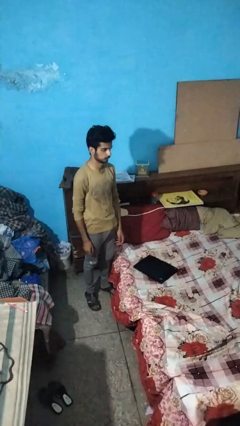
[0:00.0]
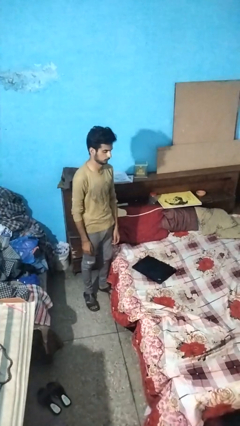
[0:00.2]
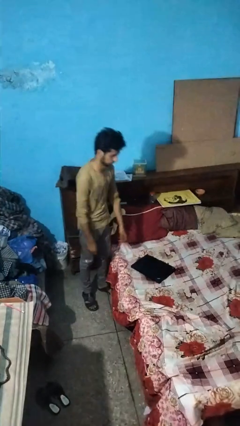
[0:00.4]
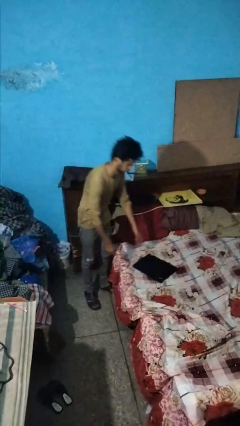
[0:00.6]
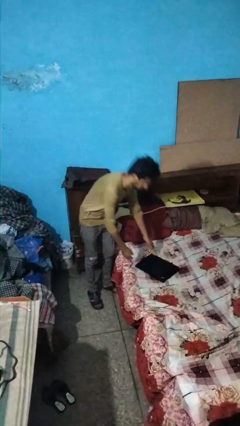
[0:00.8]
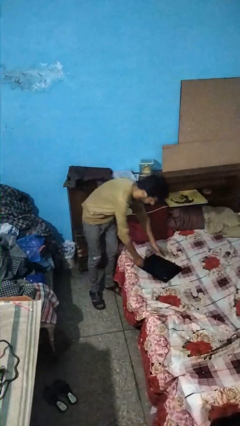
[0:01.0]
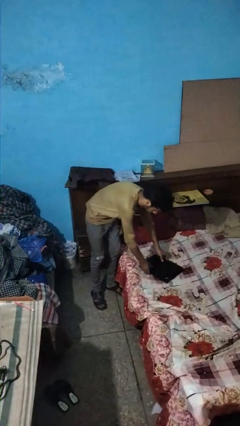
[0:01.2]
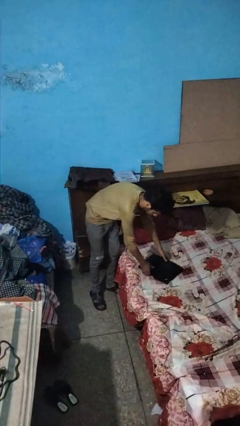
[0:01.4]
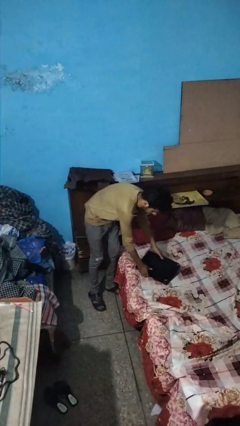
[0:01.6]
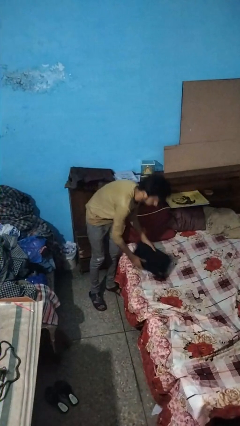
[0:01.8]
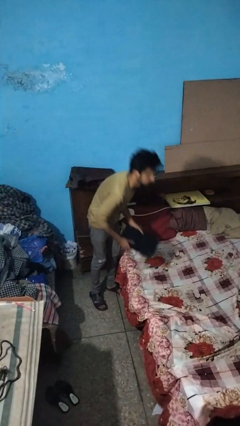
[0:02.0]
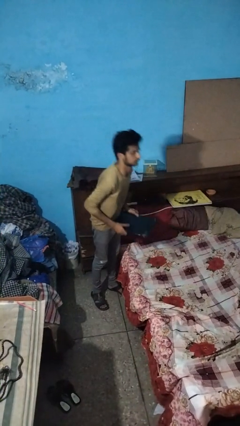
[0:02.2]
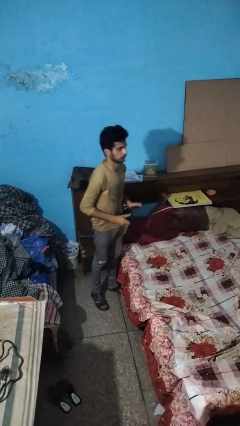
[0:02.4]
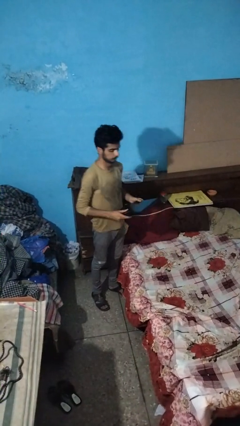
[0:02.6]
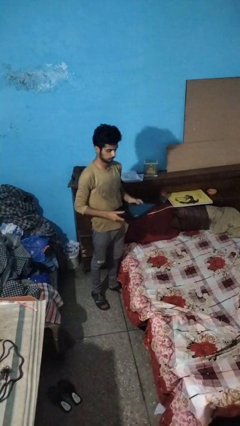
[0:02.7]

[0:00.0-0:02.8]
person picks up object from bed

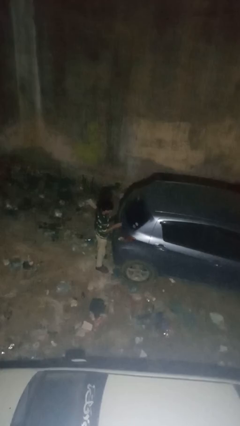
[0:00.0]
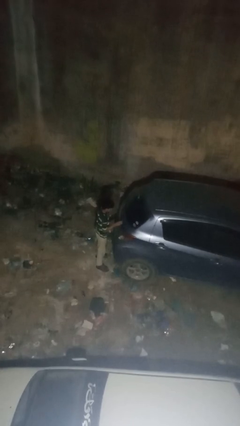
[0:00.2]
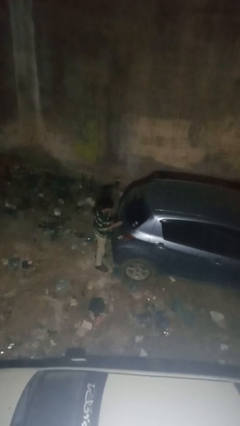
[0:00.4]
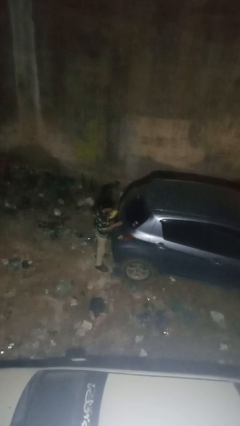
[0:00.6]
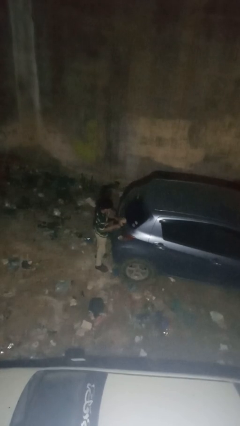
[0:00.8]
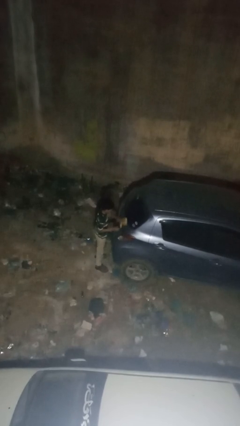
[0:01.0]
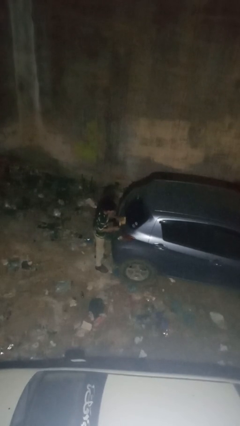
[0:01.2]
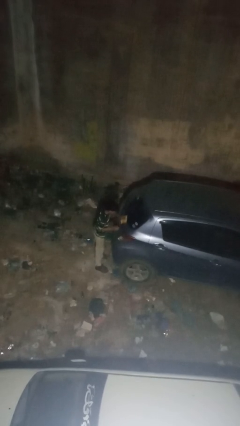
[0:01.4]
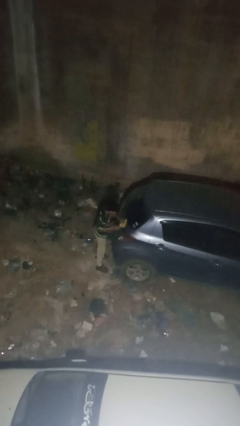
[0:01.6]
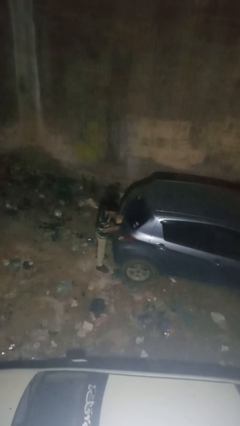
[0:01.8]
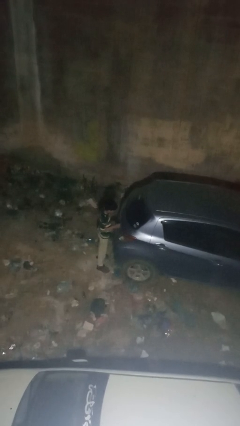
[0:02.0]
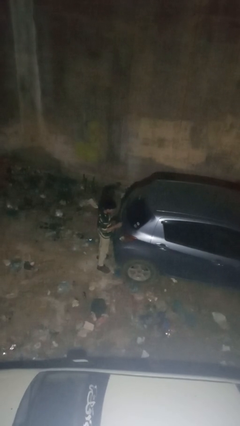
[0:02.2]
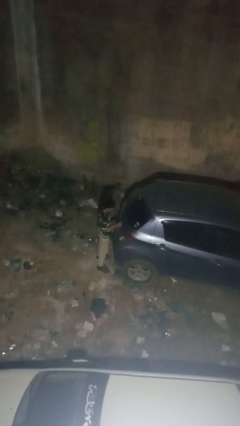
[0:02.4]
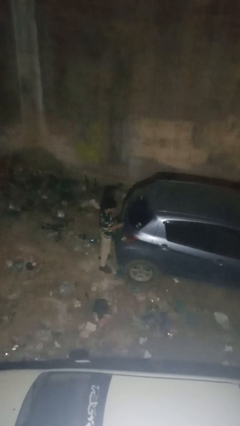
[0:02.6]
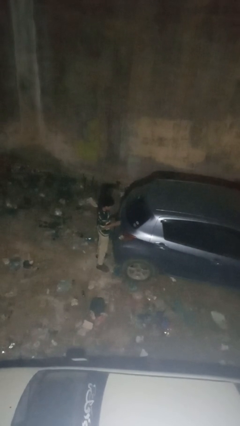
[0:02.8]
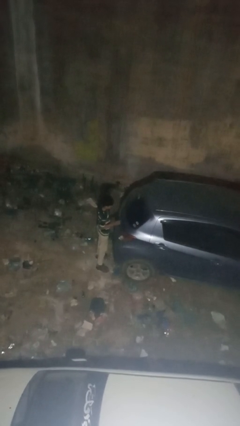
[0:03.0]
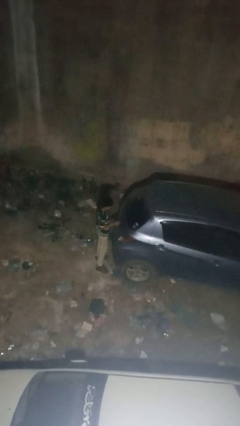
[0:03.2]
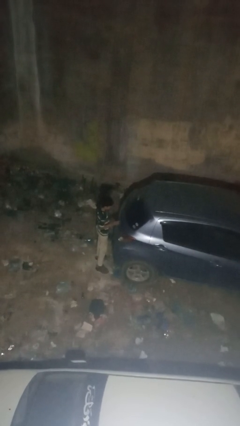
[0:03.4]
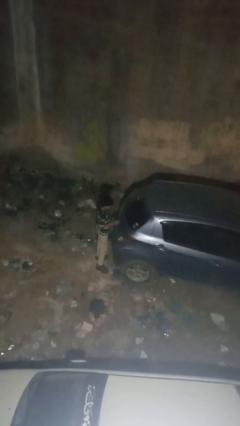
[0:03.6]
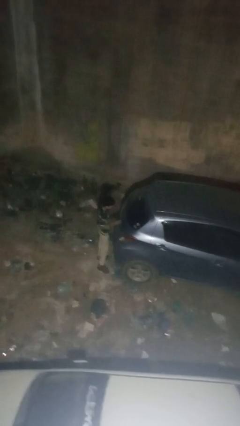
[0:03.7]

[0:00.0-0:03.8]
person polishes car with rag

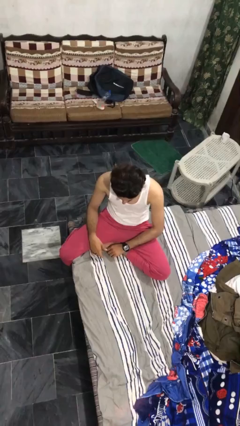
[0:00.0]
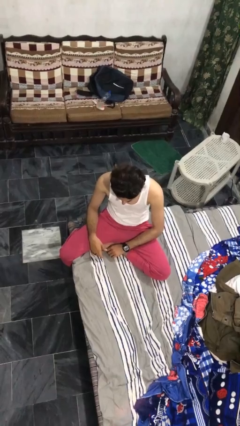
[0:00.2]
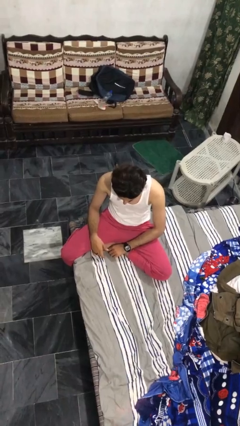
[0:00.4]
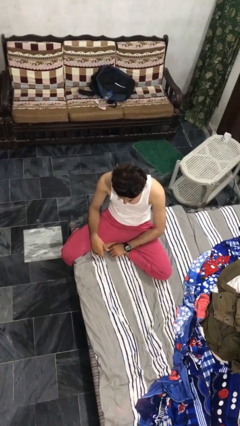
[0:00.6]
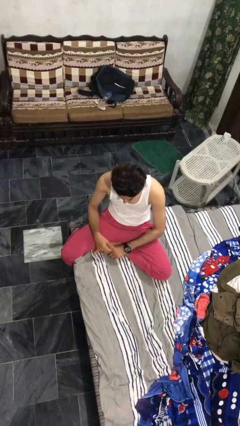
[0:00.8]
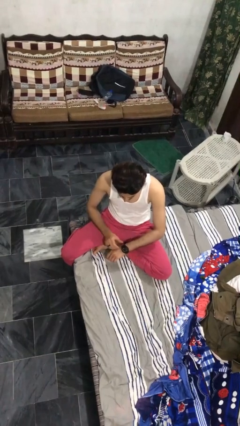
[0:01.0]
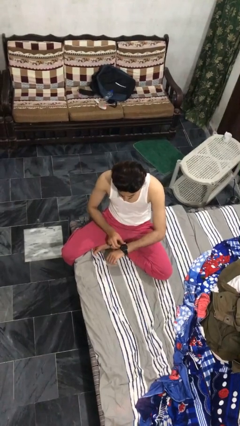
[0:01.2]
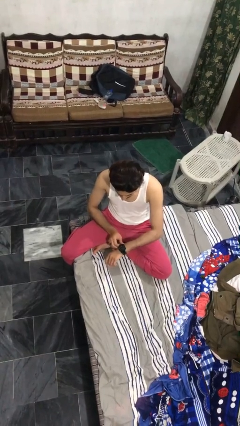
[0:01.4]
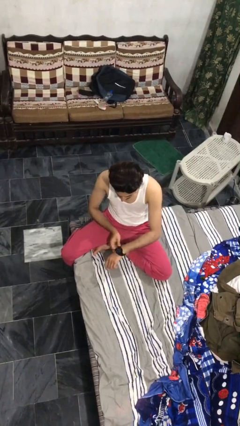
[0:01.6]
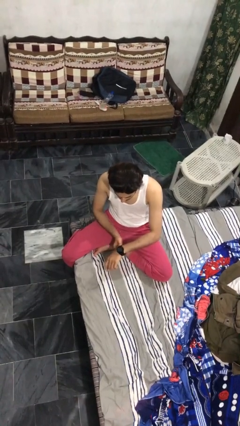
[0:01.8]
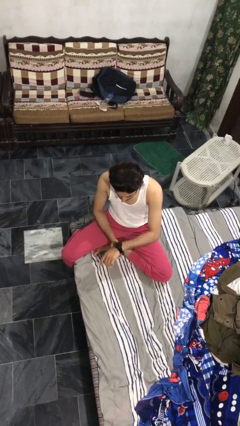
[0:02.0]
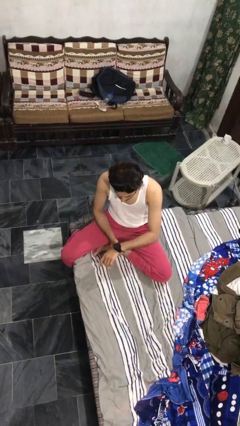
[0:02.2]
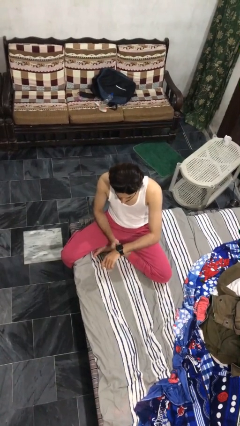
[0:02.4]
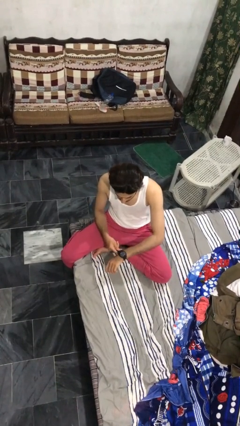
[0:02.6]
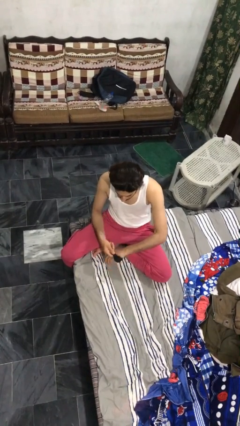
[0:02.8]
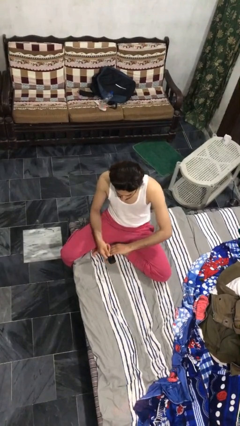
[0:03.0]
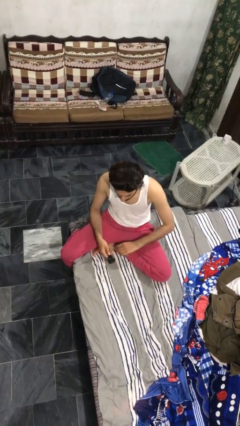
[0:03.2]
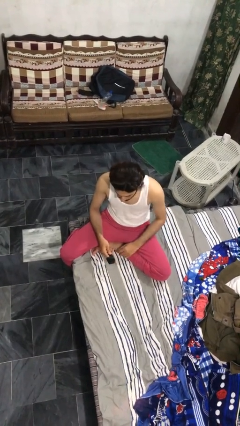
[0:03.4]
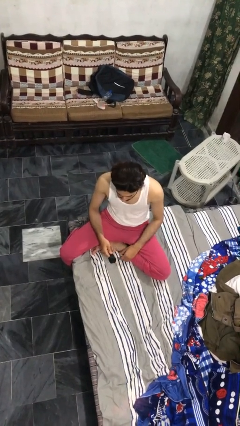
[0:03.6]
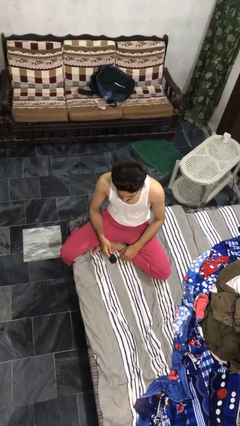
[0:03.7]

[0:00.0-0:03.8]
person takes off wristwatch

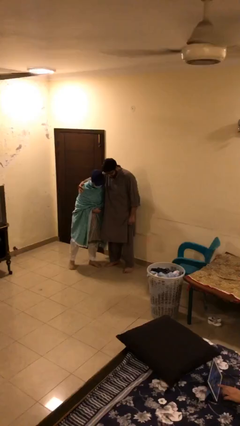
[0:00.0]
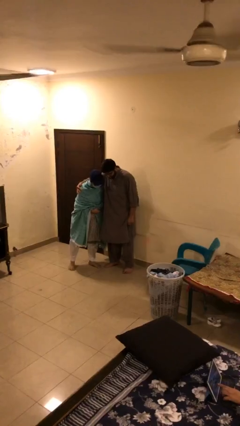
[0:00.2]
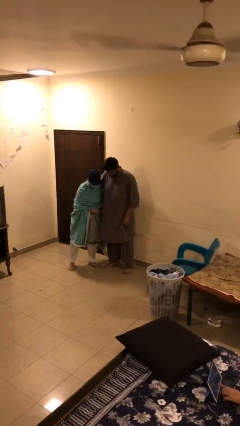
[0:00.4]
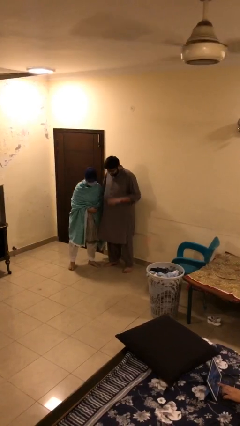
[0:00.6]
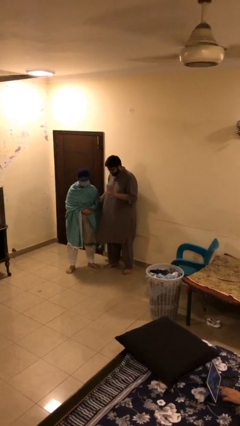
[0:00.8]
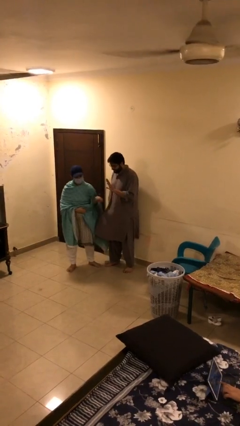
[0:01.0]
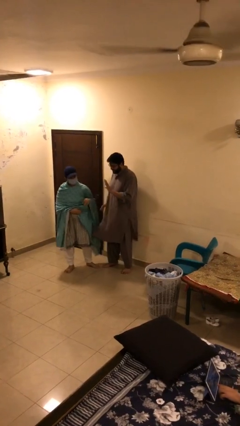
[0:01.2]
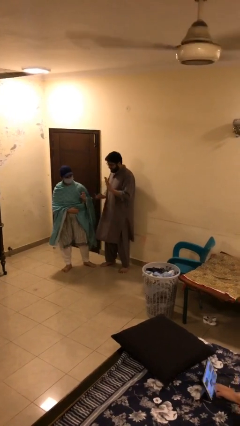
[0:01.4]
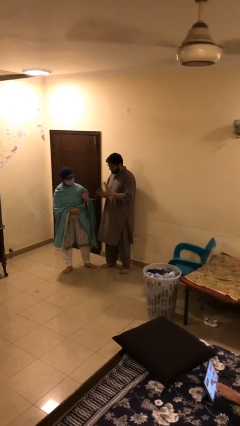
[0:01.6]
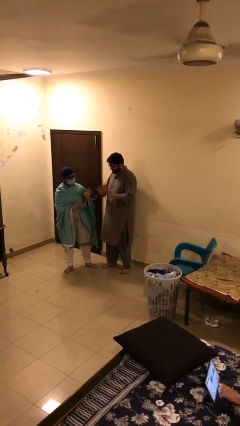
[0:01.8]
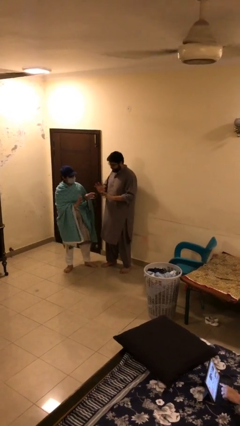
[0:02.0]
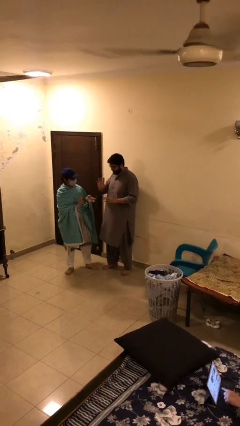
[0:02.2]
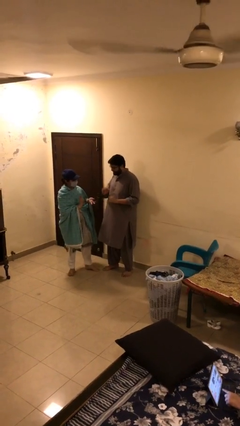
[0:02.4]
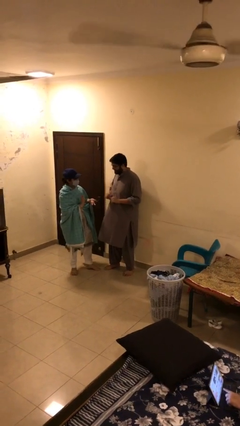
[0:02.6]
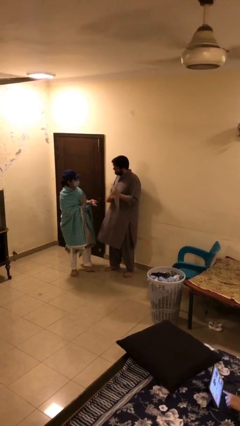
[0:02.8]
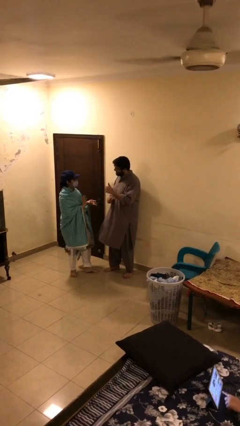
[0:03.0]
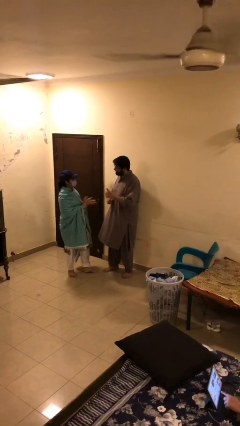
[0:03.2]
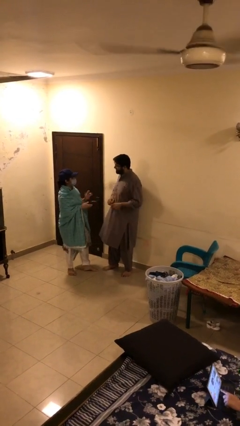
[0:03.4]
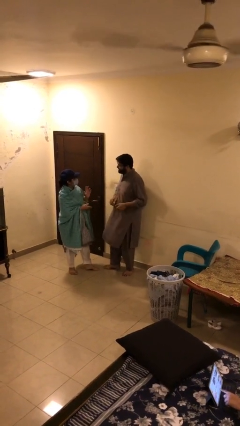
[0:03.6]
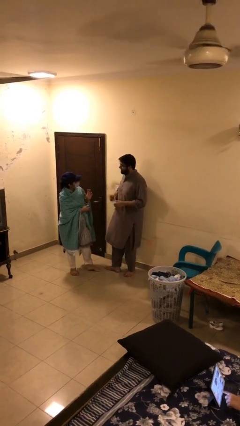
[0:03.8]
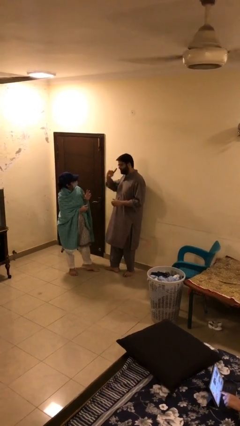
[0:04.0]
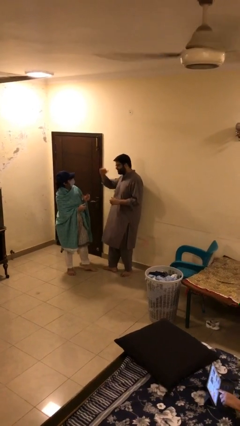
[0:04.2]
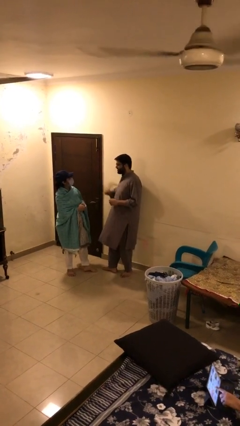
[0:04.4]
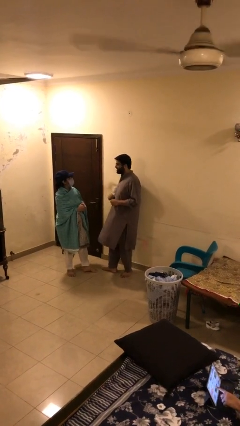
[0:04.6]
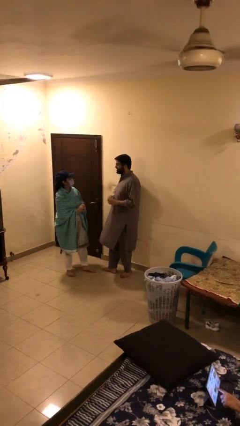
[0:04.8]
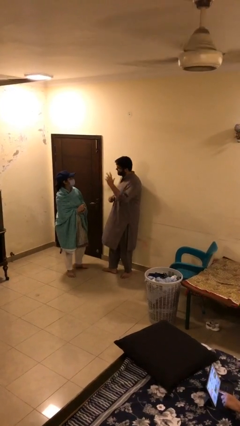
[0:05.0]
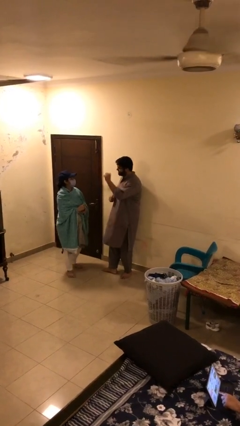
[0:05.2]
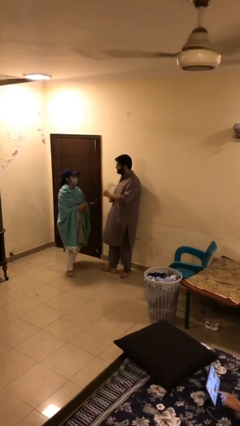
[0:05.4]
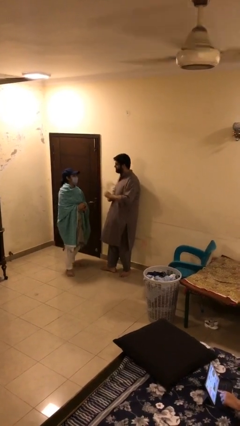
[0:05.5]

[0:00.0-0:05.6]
person talks to person

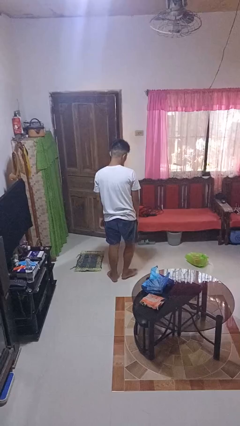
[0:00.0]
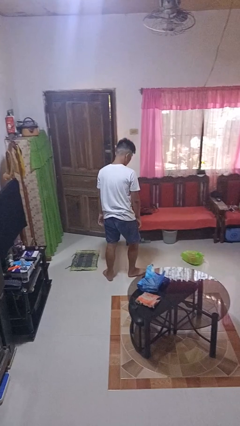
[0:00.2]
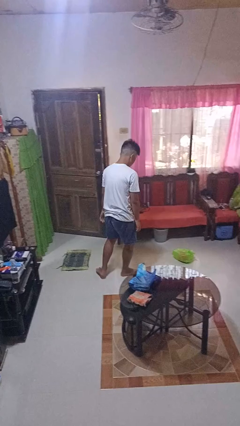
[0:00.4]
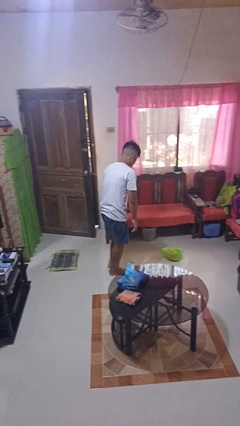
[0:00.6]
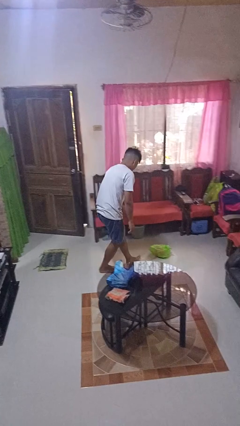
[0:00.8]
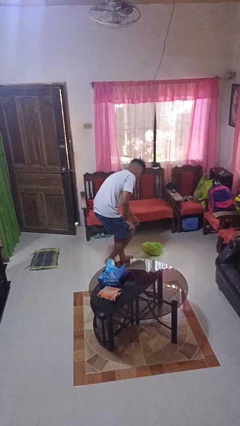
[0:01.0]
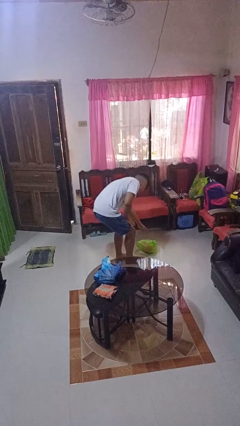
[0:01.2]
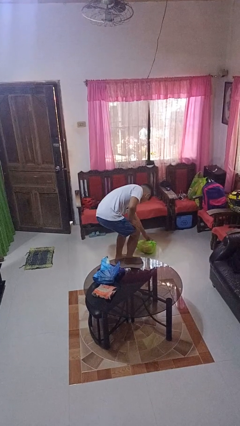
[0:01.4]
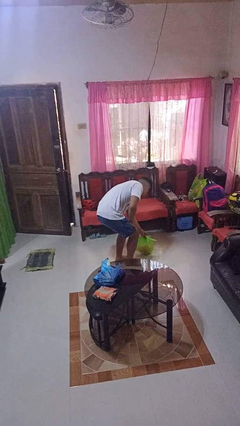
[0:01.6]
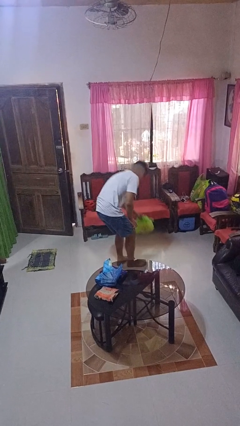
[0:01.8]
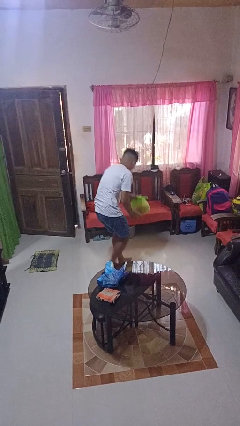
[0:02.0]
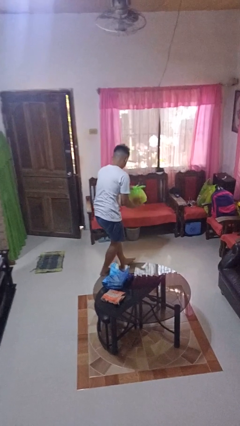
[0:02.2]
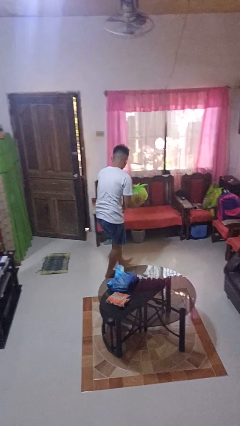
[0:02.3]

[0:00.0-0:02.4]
person picks up object from floor
